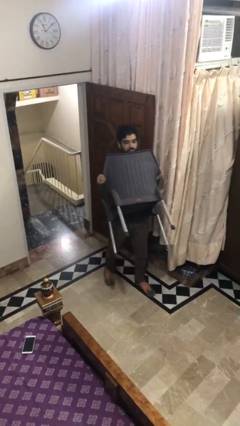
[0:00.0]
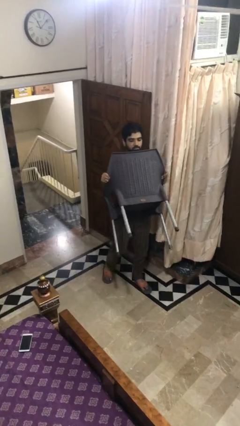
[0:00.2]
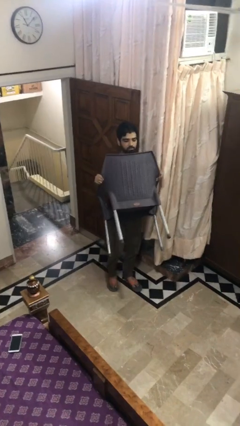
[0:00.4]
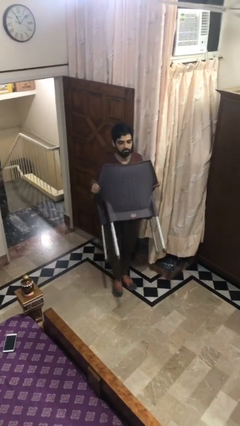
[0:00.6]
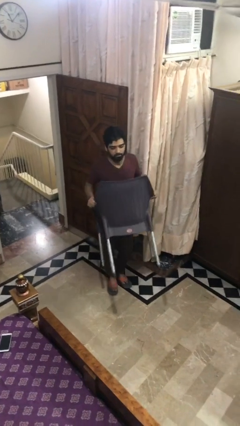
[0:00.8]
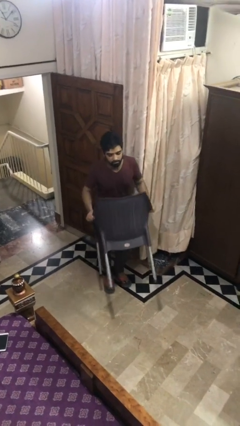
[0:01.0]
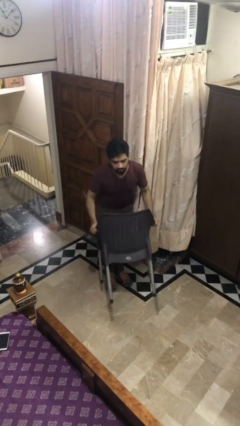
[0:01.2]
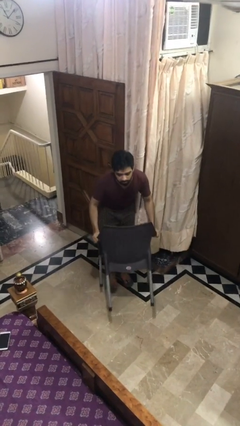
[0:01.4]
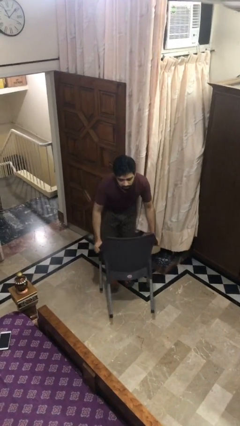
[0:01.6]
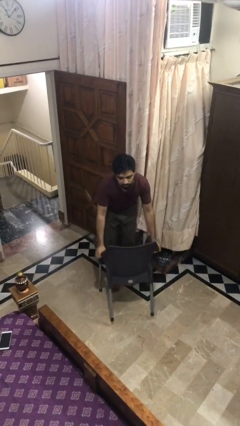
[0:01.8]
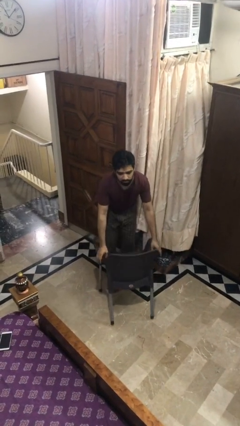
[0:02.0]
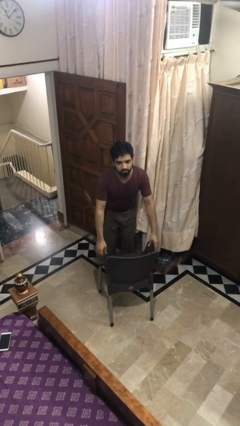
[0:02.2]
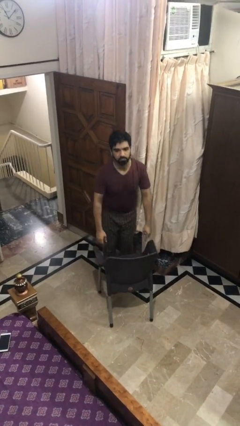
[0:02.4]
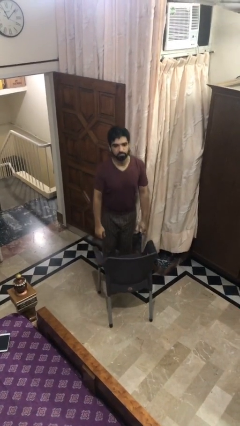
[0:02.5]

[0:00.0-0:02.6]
person puts down object on floor

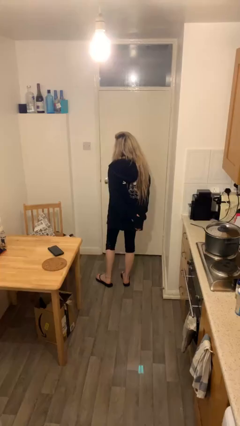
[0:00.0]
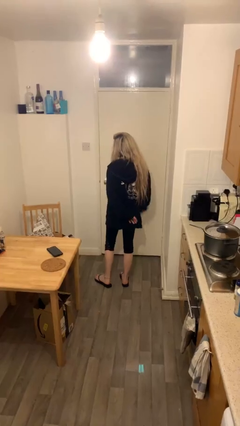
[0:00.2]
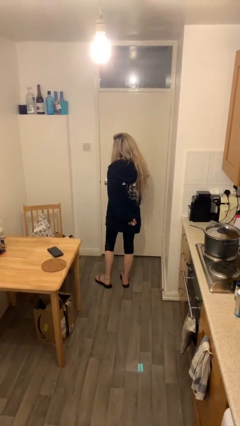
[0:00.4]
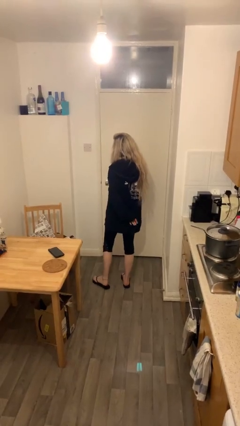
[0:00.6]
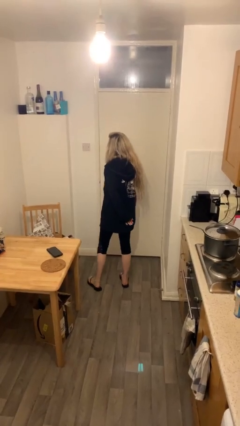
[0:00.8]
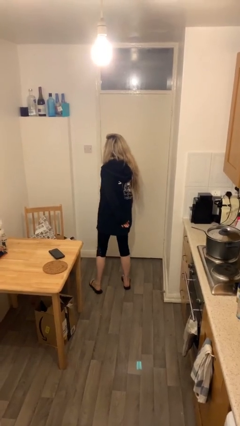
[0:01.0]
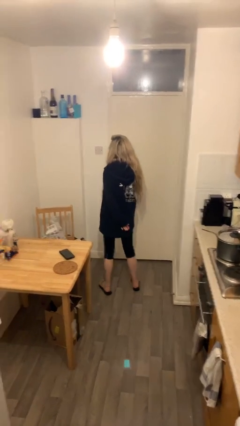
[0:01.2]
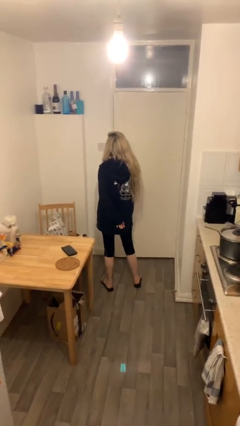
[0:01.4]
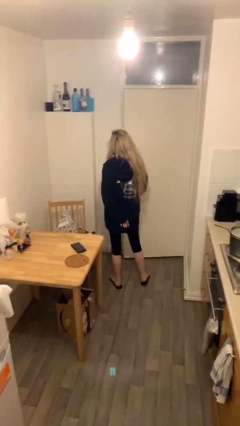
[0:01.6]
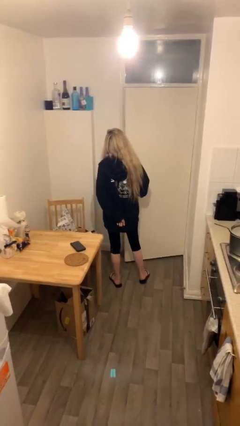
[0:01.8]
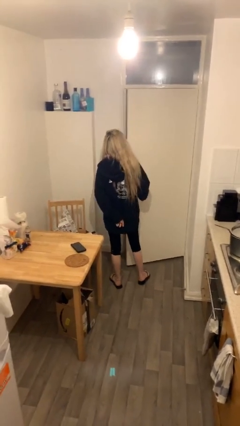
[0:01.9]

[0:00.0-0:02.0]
person opens facility door

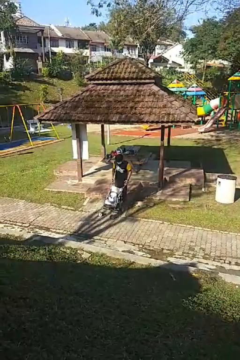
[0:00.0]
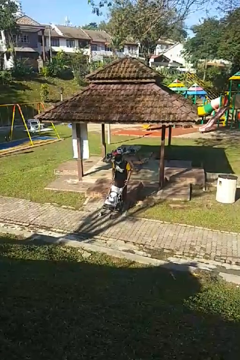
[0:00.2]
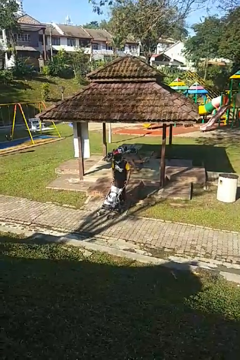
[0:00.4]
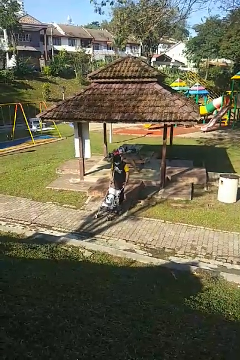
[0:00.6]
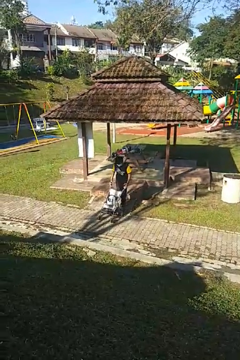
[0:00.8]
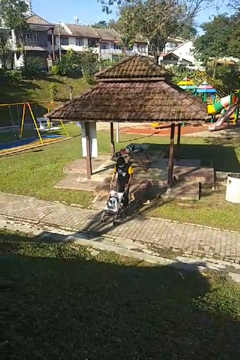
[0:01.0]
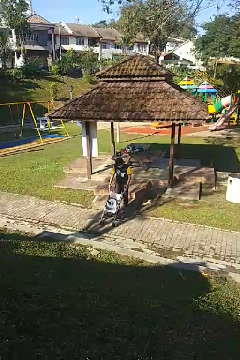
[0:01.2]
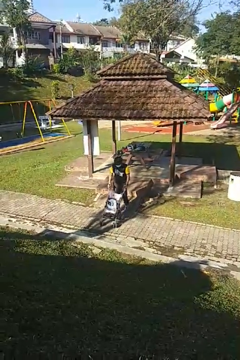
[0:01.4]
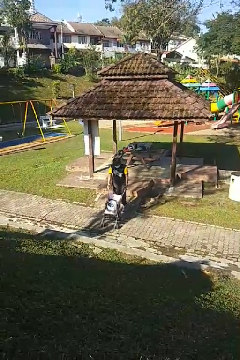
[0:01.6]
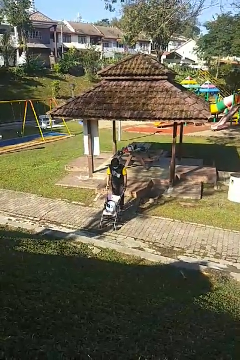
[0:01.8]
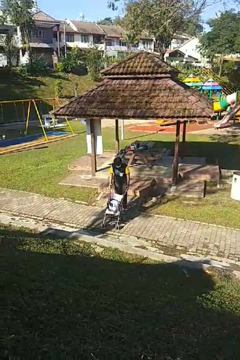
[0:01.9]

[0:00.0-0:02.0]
person pushes wheeled cart

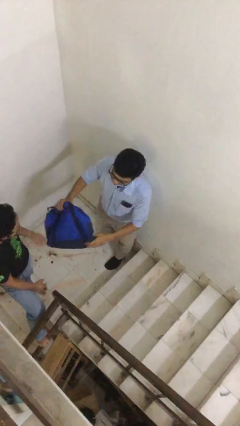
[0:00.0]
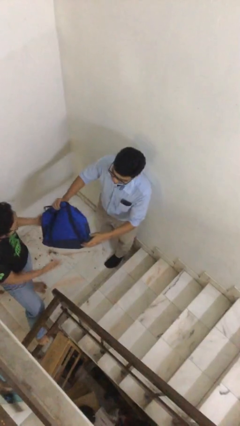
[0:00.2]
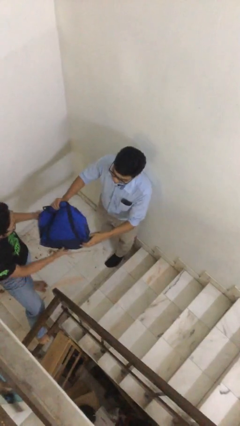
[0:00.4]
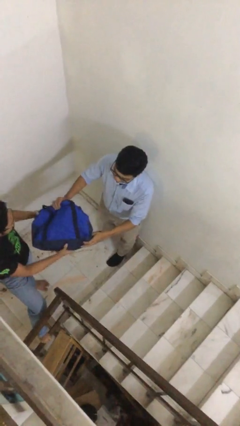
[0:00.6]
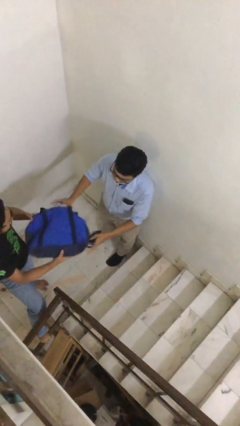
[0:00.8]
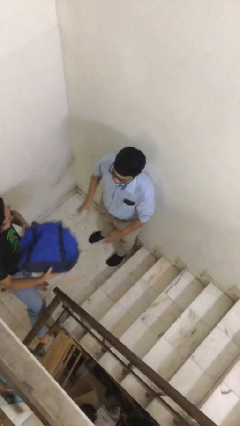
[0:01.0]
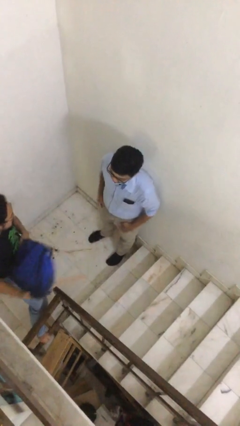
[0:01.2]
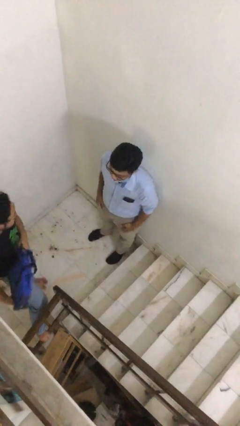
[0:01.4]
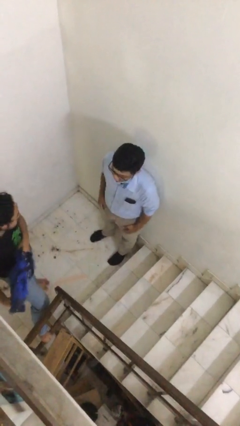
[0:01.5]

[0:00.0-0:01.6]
person transfers object to person

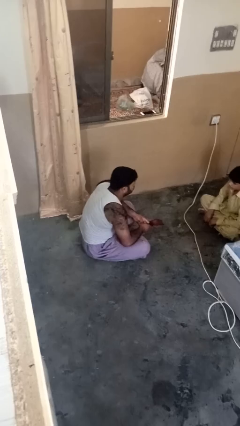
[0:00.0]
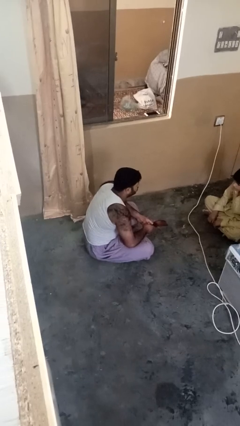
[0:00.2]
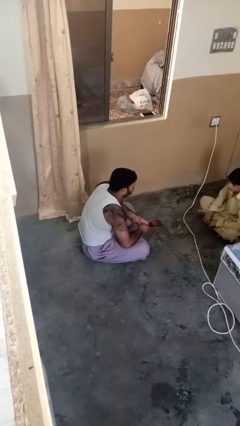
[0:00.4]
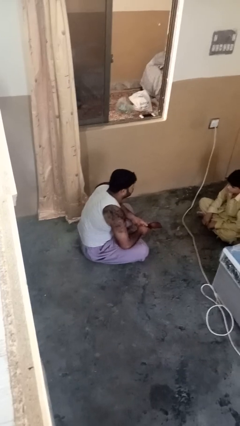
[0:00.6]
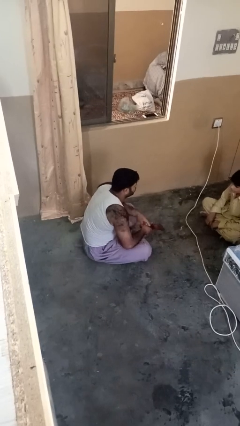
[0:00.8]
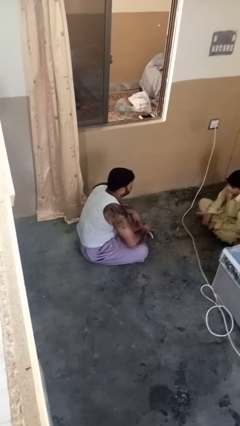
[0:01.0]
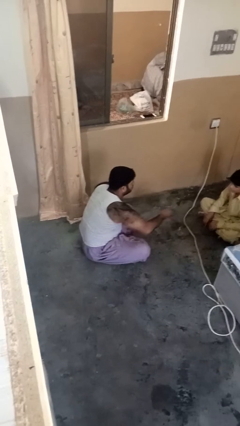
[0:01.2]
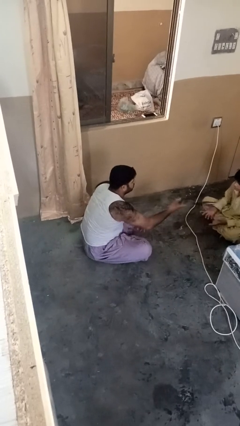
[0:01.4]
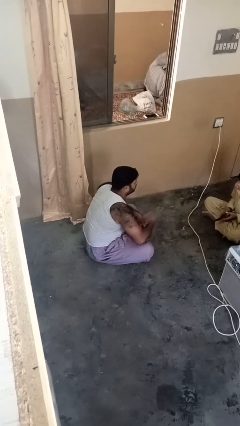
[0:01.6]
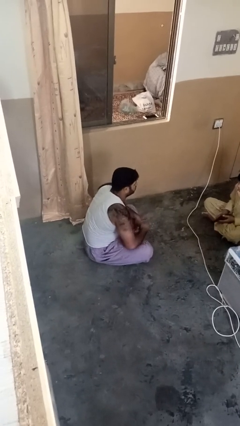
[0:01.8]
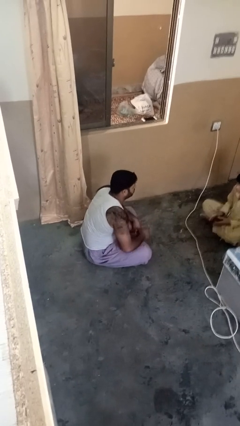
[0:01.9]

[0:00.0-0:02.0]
person throws object to person

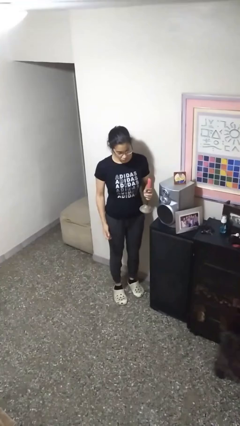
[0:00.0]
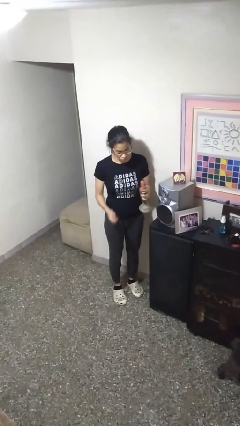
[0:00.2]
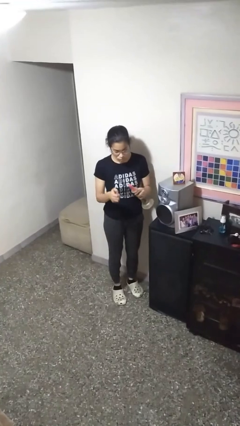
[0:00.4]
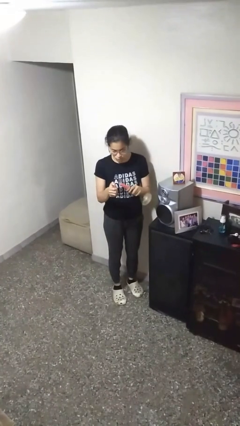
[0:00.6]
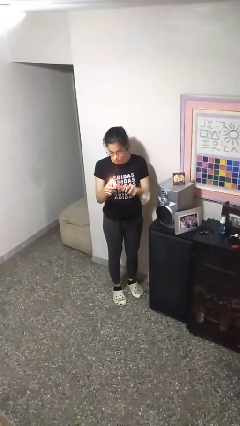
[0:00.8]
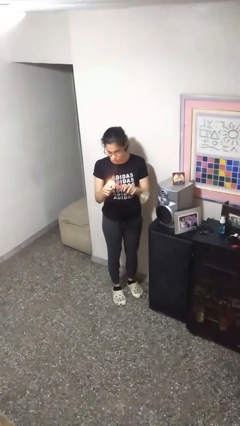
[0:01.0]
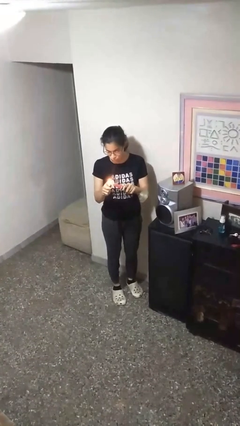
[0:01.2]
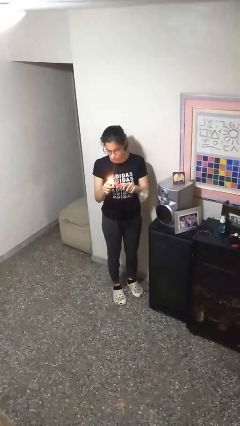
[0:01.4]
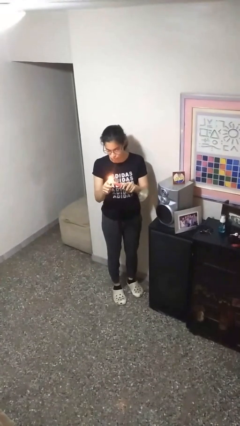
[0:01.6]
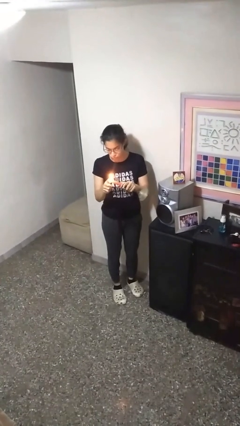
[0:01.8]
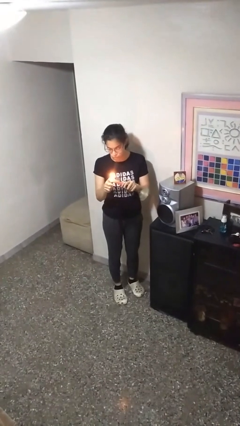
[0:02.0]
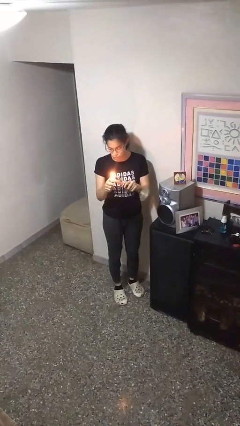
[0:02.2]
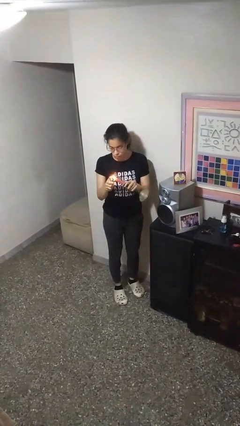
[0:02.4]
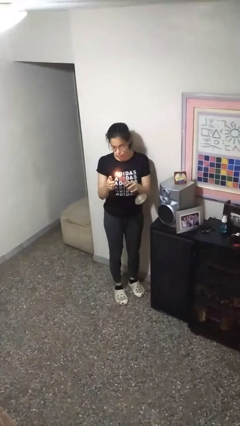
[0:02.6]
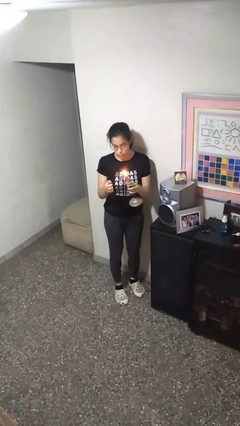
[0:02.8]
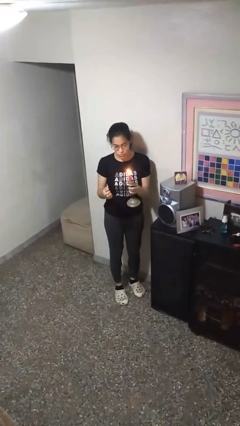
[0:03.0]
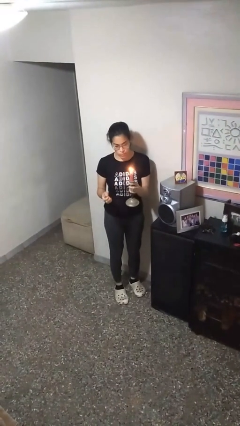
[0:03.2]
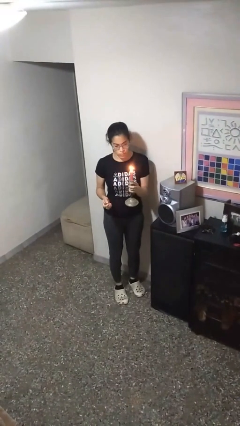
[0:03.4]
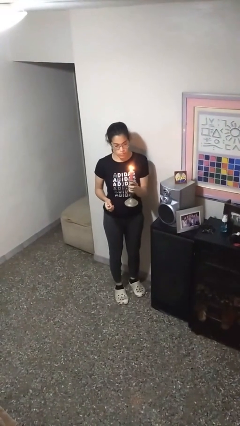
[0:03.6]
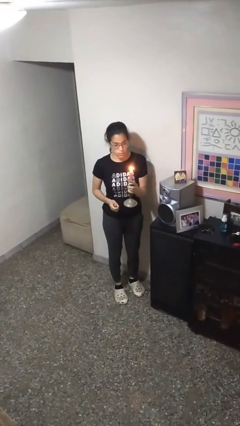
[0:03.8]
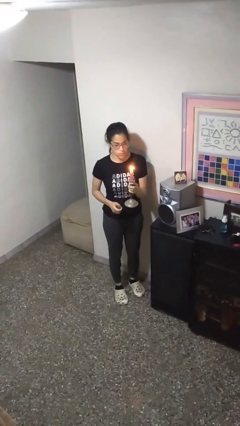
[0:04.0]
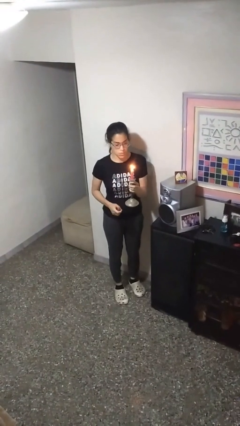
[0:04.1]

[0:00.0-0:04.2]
person lights candle

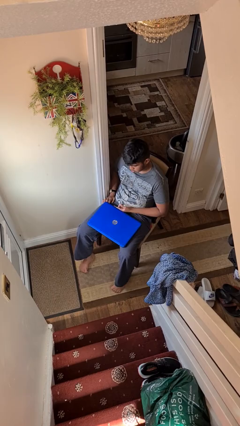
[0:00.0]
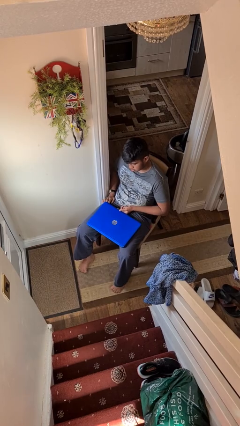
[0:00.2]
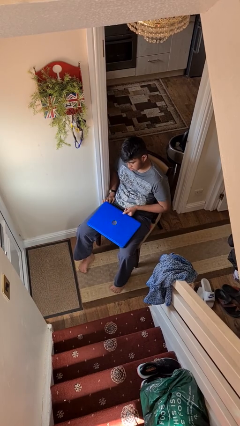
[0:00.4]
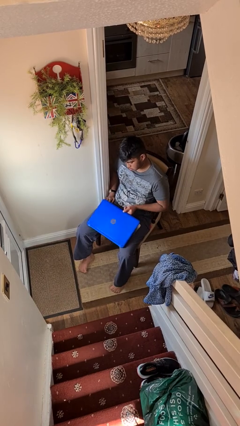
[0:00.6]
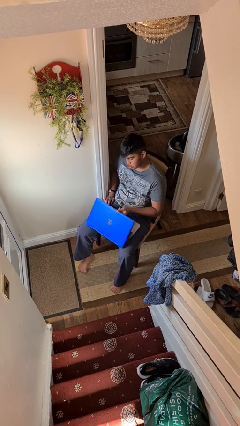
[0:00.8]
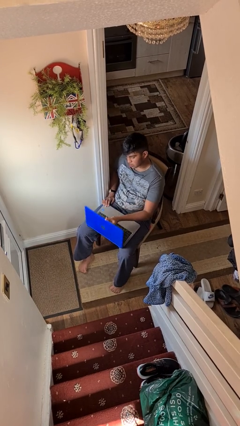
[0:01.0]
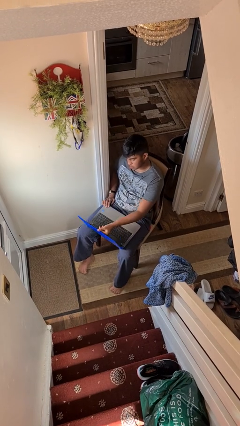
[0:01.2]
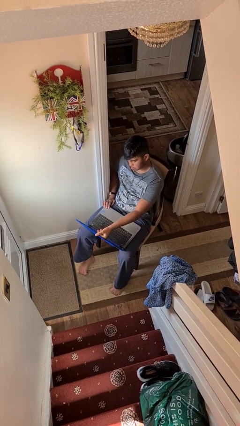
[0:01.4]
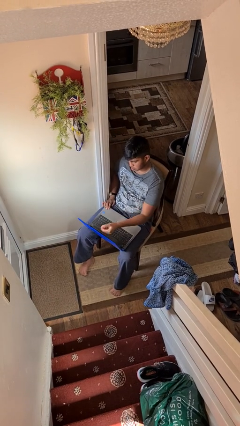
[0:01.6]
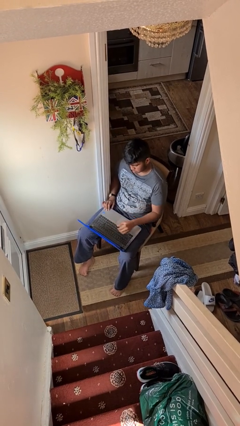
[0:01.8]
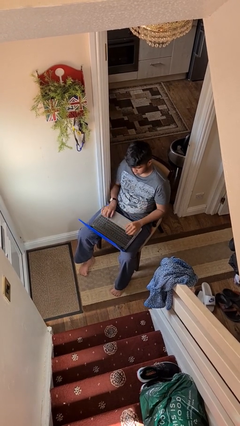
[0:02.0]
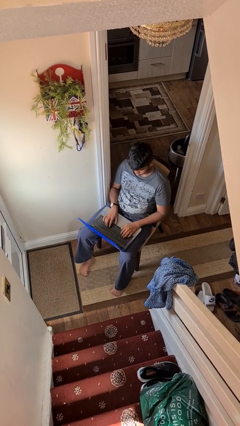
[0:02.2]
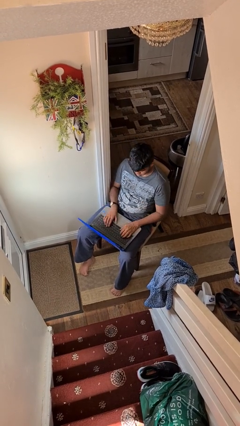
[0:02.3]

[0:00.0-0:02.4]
person opens laptop
